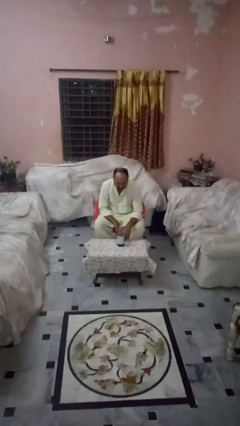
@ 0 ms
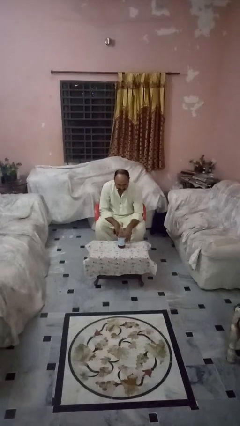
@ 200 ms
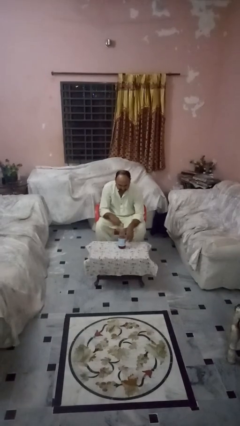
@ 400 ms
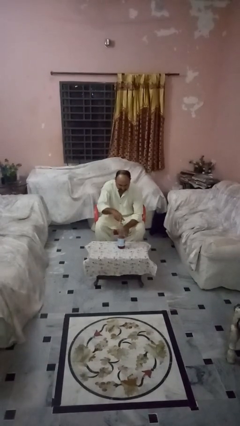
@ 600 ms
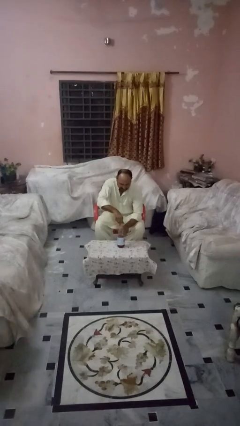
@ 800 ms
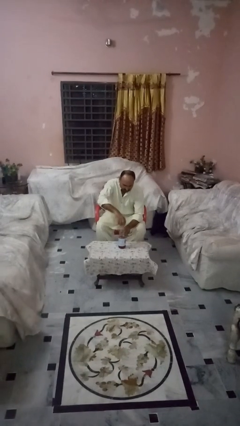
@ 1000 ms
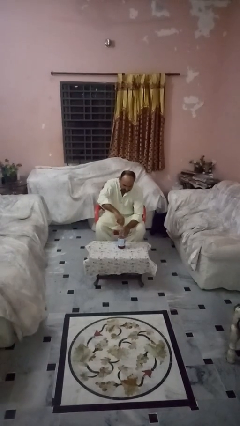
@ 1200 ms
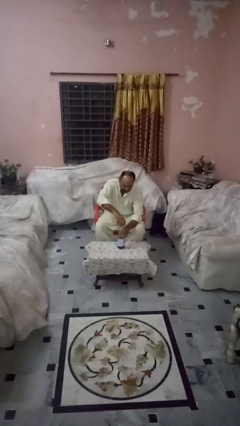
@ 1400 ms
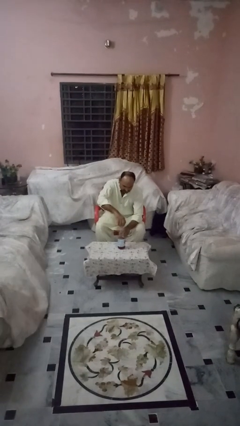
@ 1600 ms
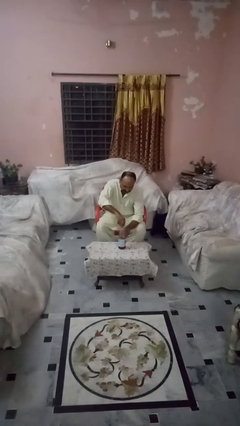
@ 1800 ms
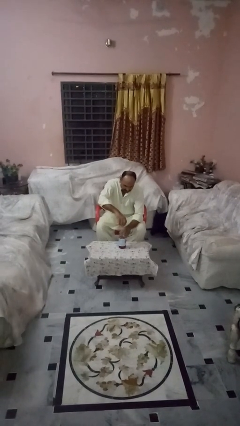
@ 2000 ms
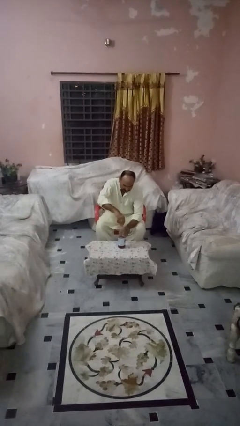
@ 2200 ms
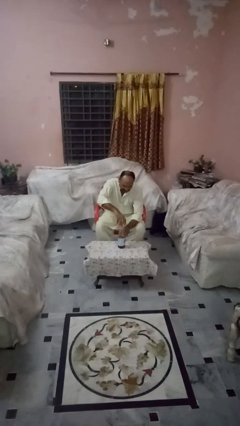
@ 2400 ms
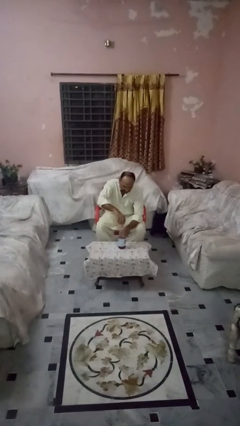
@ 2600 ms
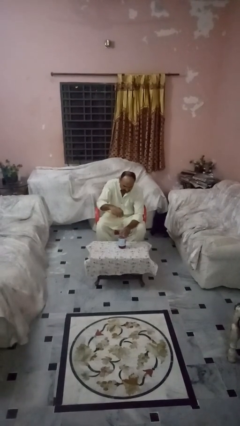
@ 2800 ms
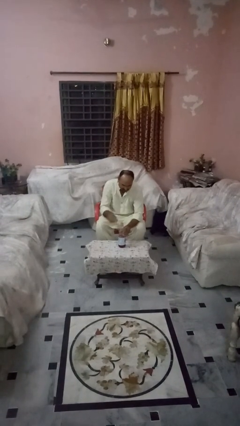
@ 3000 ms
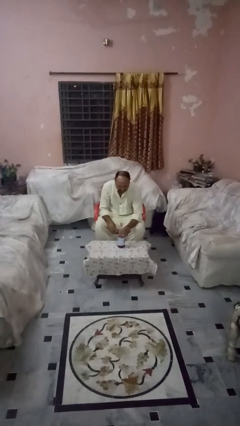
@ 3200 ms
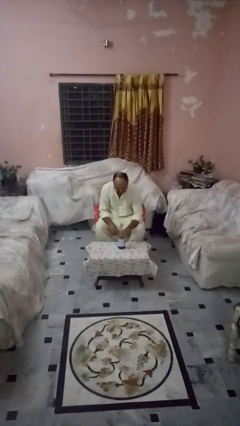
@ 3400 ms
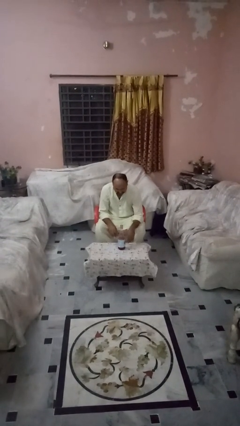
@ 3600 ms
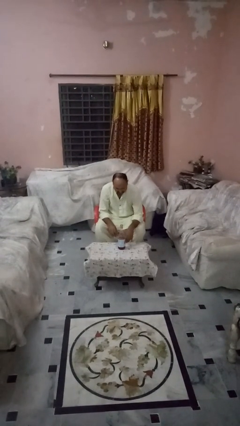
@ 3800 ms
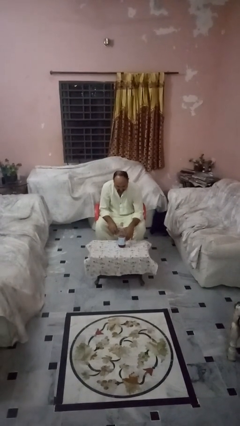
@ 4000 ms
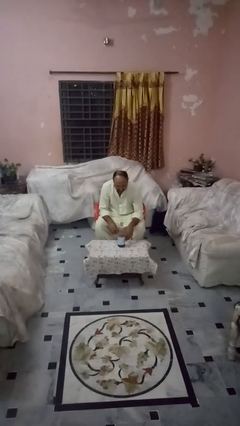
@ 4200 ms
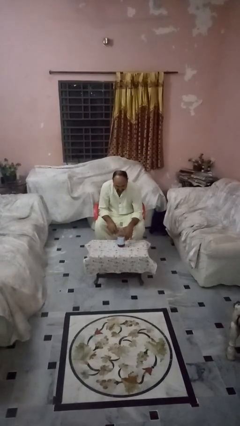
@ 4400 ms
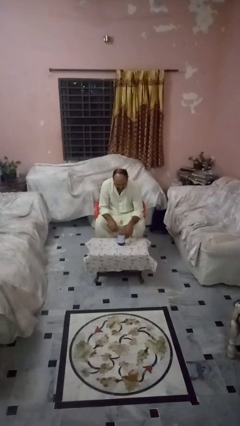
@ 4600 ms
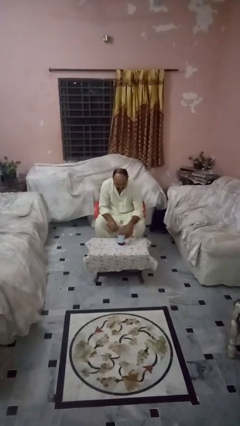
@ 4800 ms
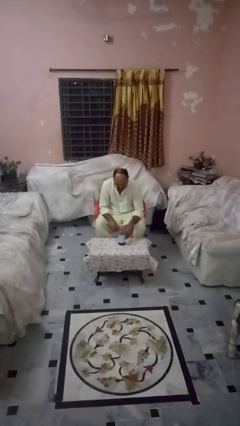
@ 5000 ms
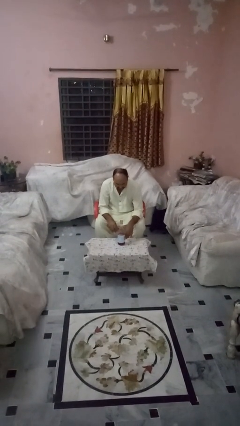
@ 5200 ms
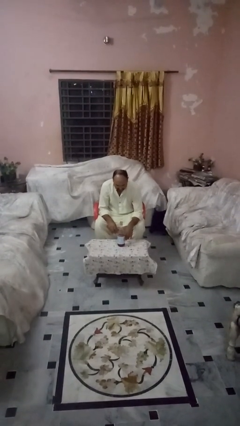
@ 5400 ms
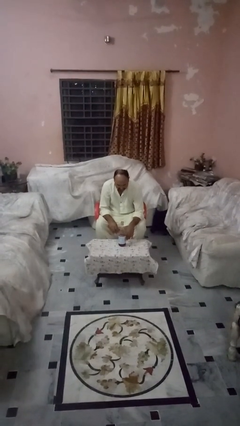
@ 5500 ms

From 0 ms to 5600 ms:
person unscrews lid from bottle

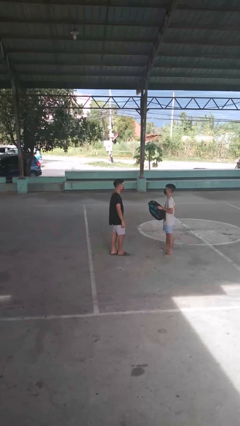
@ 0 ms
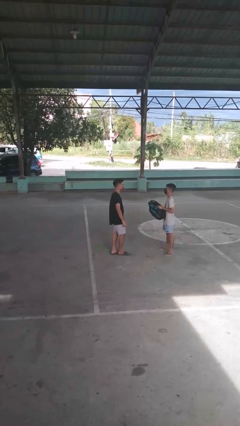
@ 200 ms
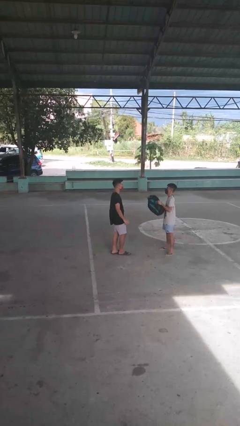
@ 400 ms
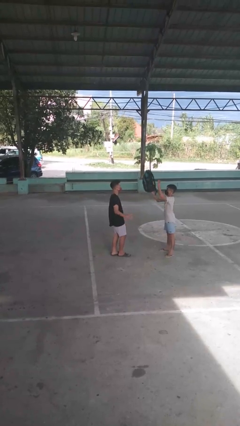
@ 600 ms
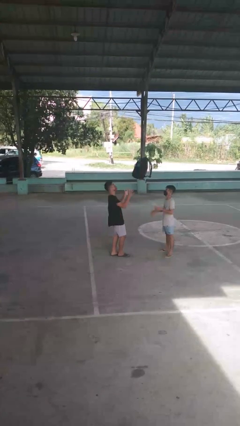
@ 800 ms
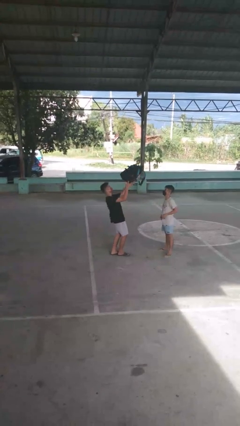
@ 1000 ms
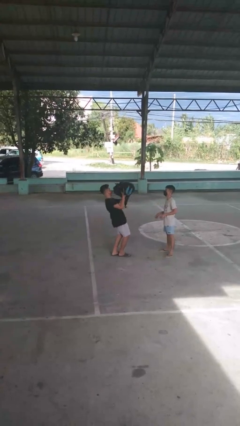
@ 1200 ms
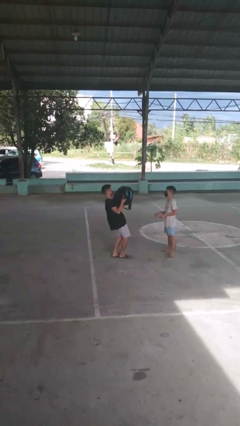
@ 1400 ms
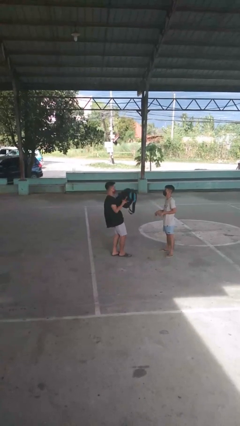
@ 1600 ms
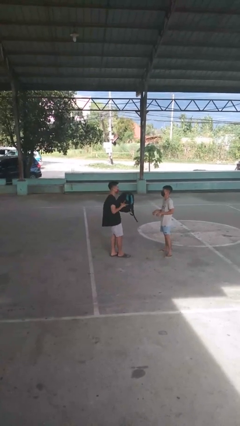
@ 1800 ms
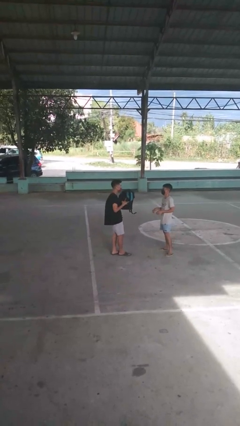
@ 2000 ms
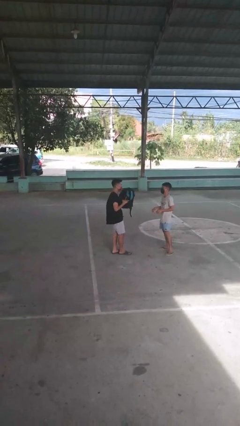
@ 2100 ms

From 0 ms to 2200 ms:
person catches object from person

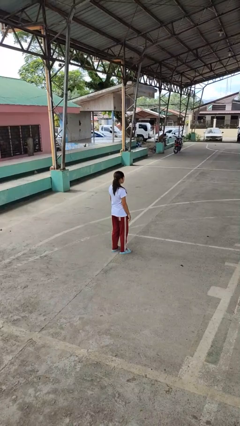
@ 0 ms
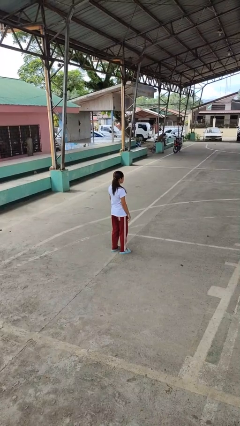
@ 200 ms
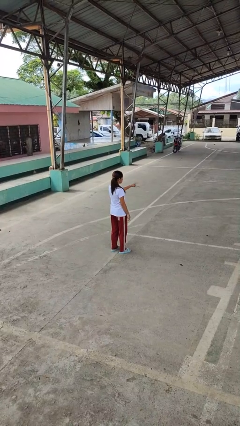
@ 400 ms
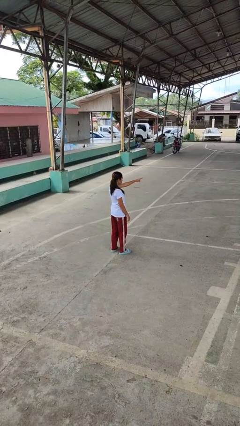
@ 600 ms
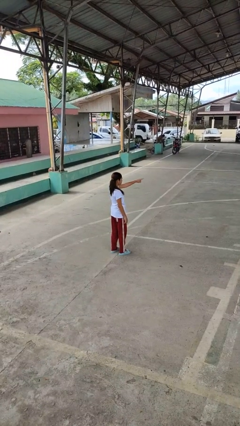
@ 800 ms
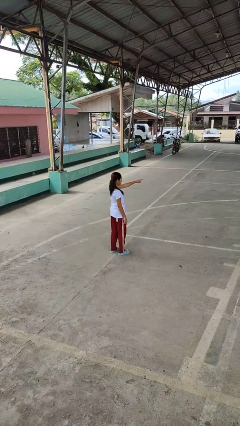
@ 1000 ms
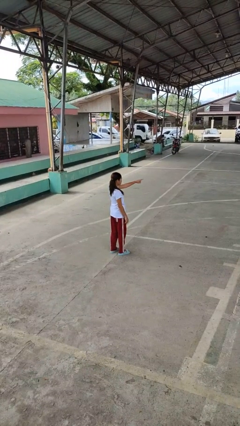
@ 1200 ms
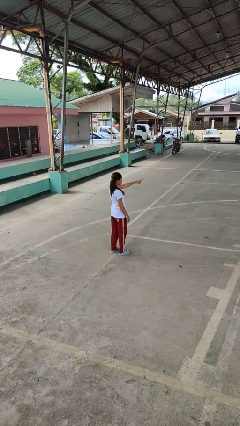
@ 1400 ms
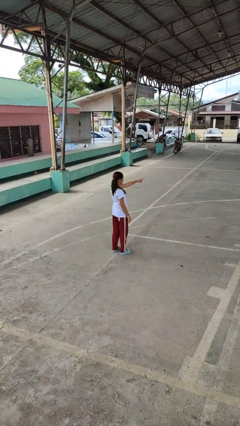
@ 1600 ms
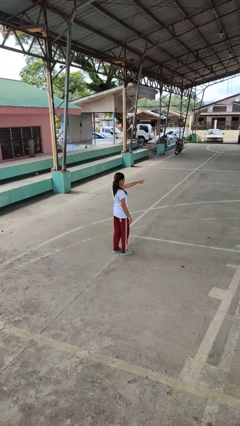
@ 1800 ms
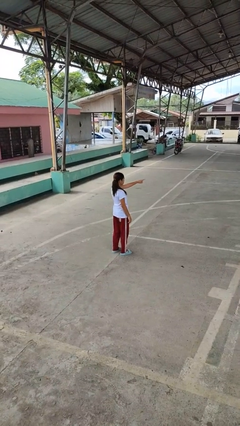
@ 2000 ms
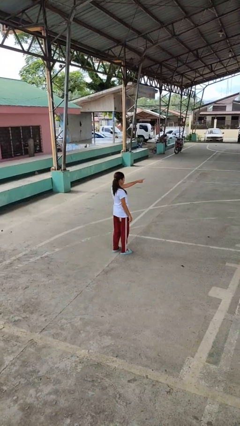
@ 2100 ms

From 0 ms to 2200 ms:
person points at person

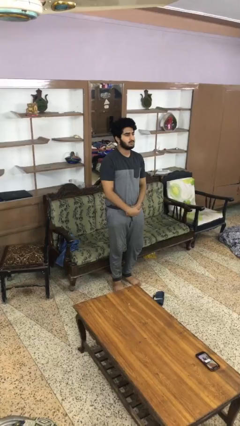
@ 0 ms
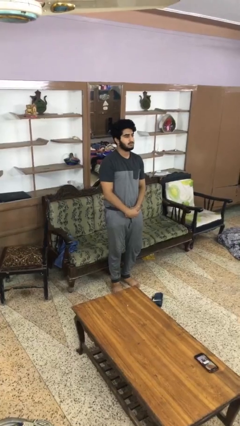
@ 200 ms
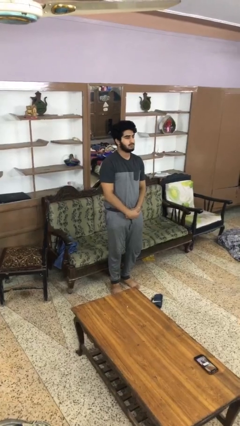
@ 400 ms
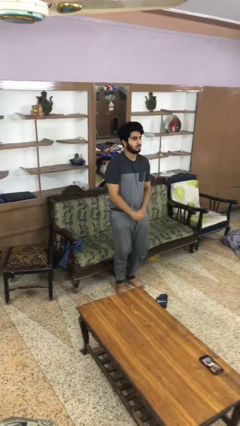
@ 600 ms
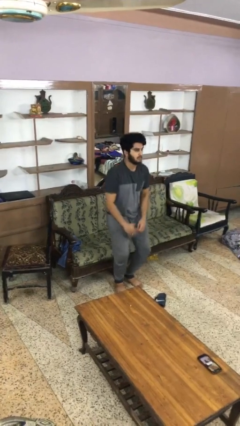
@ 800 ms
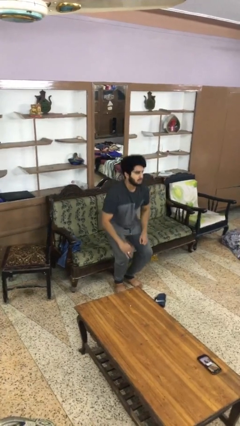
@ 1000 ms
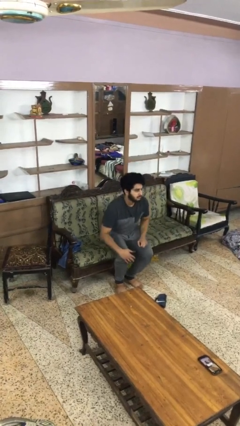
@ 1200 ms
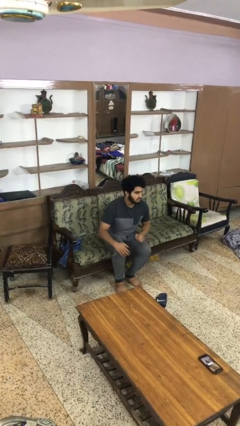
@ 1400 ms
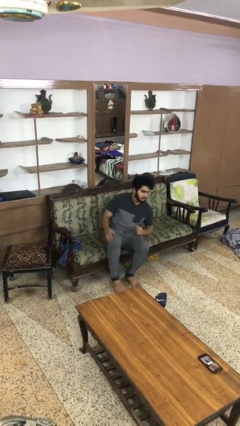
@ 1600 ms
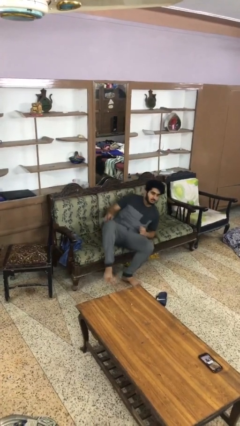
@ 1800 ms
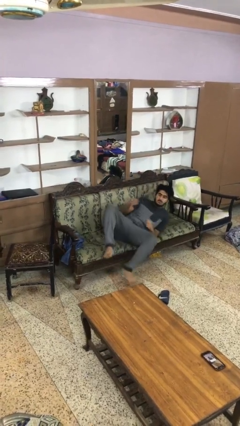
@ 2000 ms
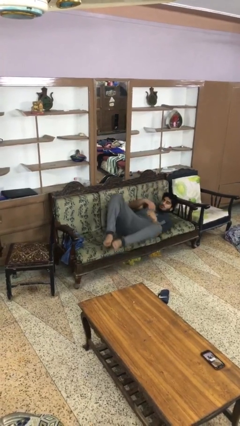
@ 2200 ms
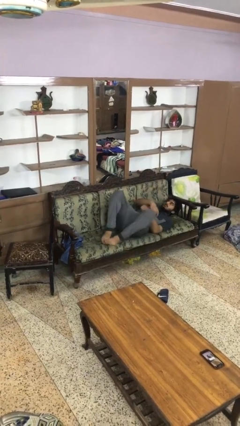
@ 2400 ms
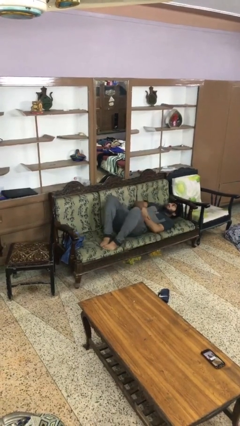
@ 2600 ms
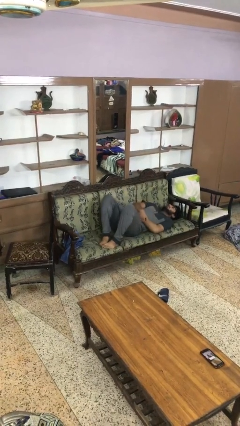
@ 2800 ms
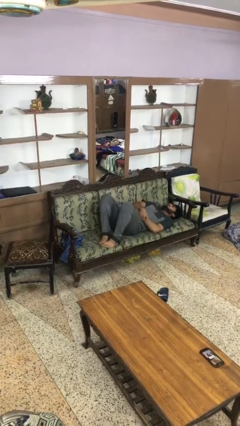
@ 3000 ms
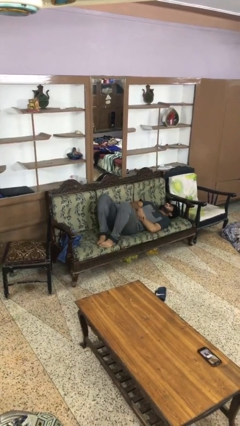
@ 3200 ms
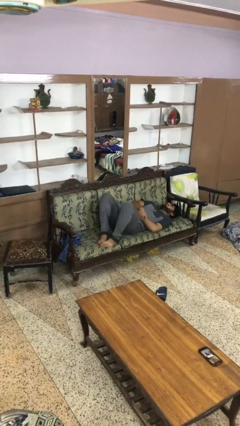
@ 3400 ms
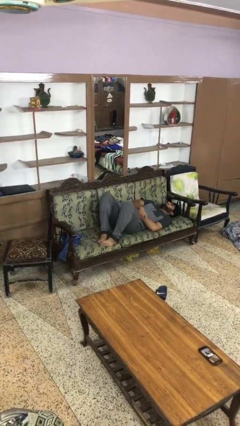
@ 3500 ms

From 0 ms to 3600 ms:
person lies down on couch

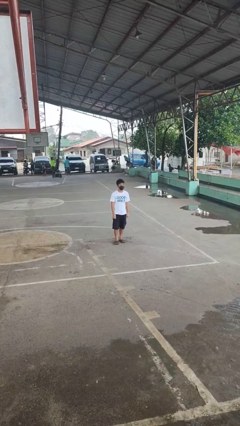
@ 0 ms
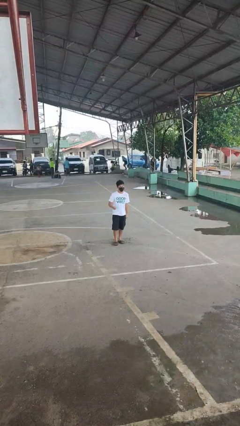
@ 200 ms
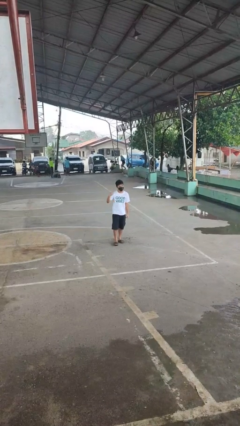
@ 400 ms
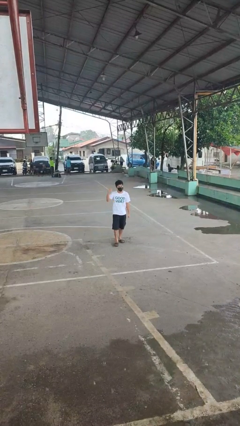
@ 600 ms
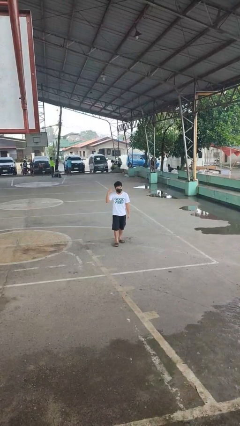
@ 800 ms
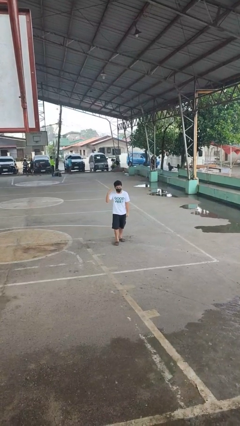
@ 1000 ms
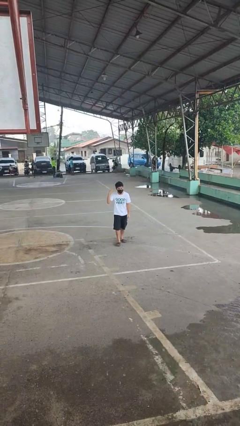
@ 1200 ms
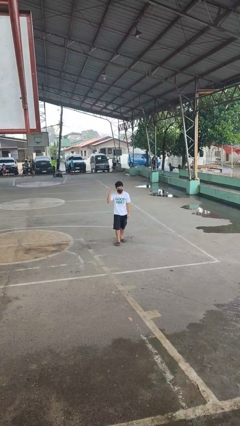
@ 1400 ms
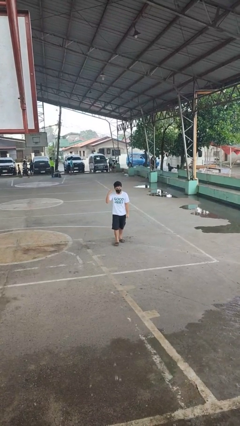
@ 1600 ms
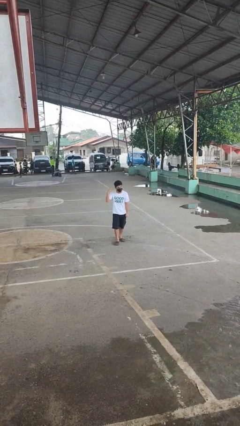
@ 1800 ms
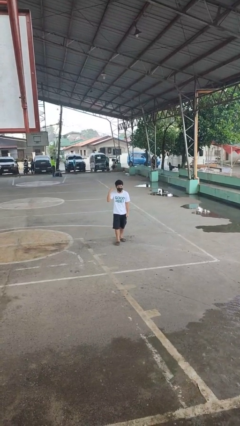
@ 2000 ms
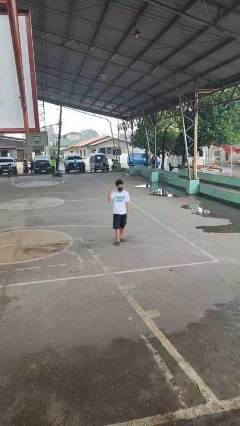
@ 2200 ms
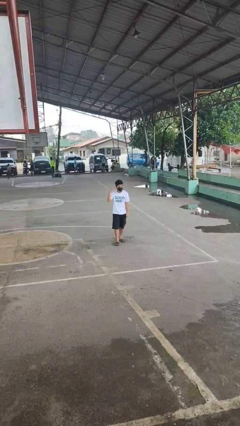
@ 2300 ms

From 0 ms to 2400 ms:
person gestures listen closely

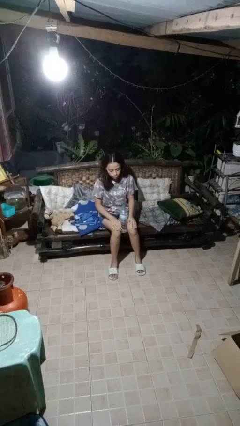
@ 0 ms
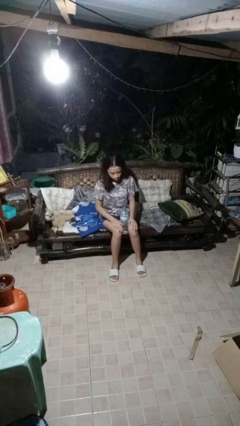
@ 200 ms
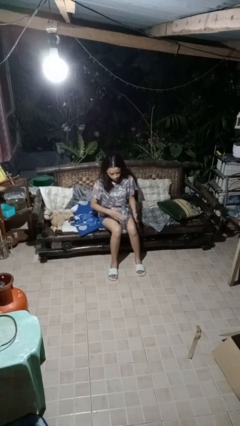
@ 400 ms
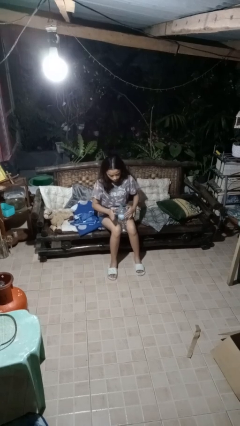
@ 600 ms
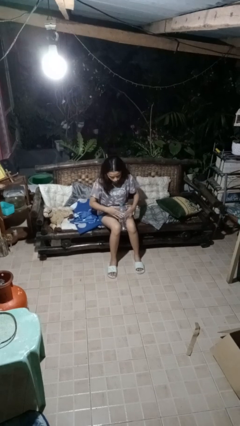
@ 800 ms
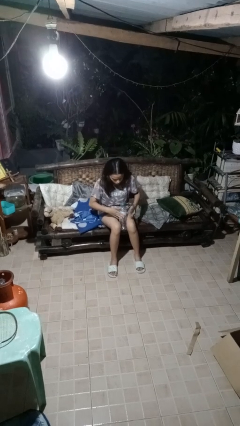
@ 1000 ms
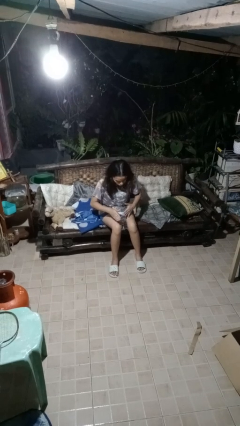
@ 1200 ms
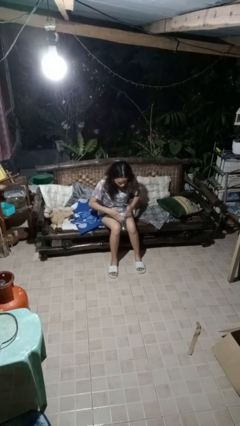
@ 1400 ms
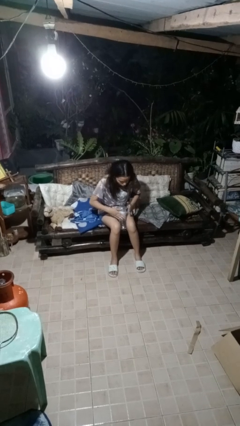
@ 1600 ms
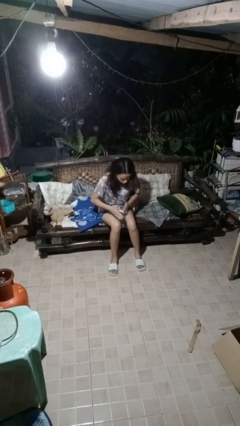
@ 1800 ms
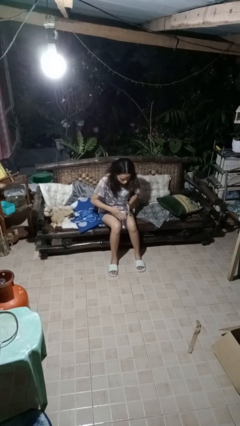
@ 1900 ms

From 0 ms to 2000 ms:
person taps object with finger
